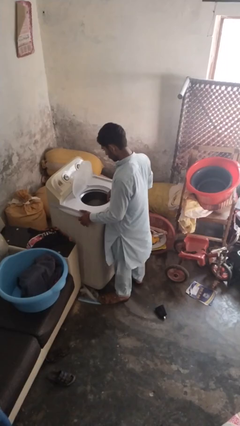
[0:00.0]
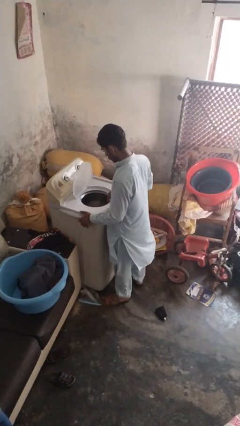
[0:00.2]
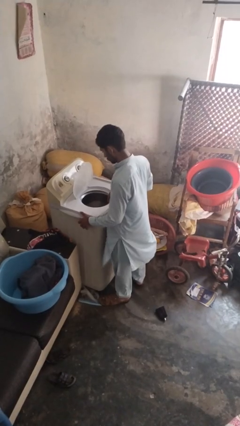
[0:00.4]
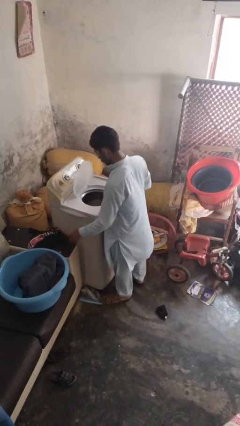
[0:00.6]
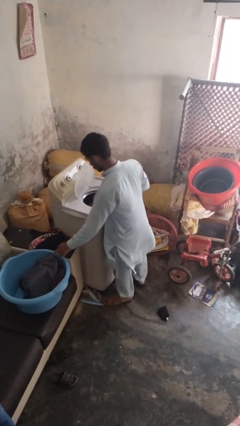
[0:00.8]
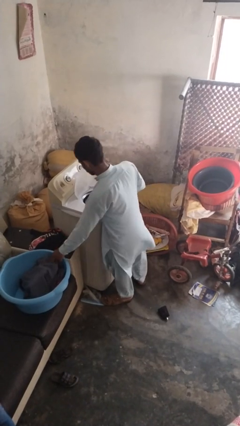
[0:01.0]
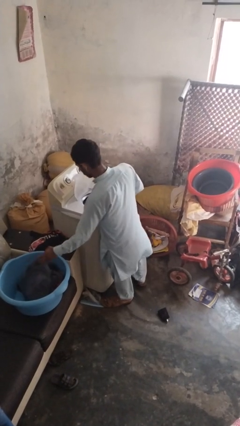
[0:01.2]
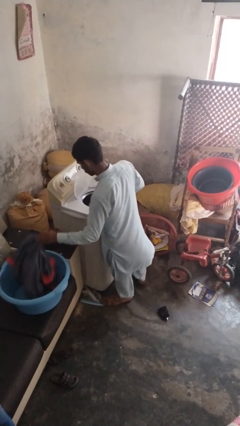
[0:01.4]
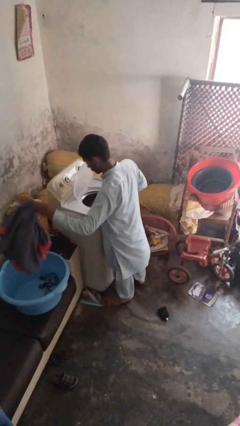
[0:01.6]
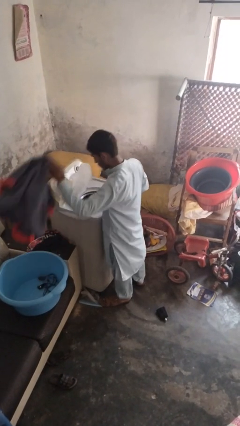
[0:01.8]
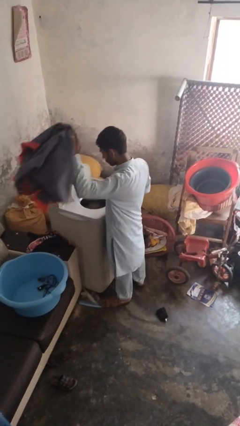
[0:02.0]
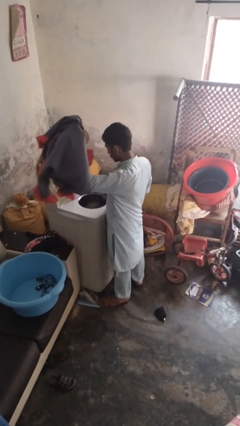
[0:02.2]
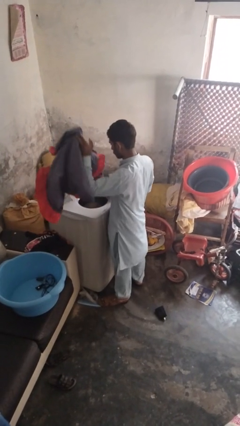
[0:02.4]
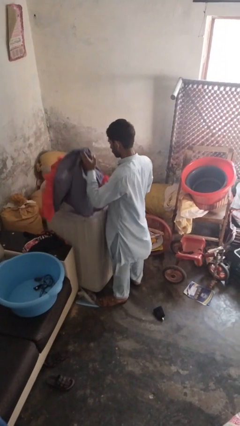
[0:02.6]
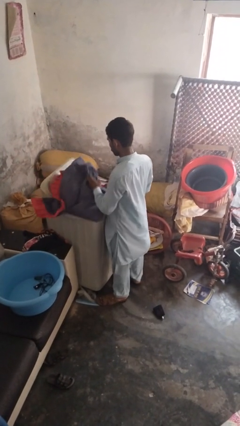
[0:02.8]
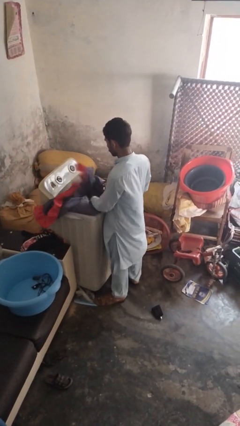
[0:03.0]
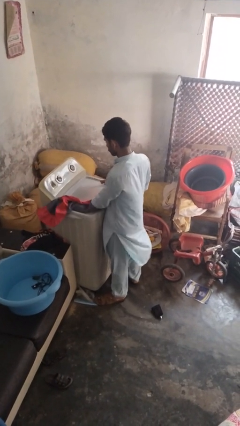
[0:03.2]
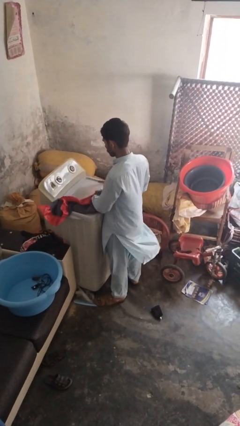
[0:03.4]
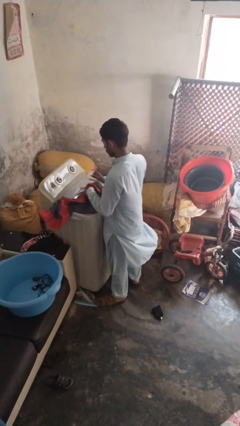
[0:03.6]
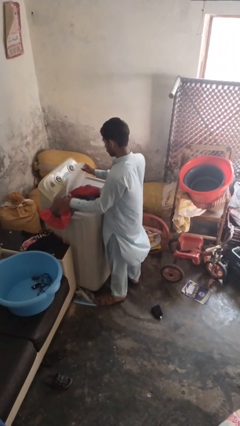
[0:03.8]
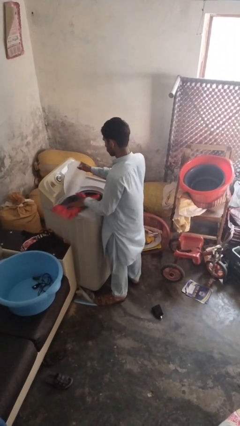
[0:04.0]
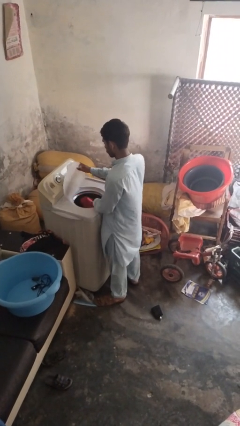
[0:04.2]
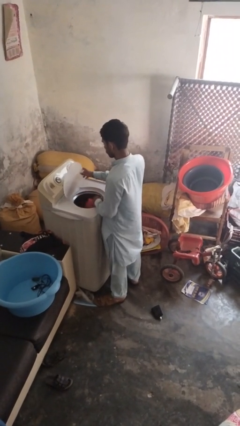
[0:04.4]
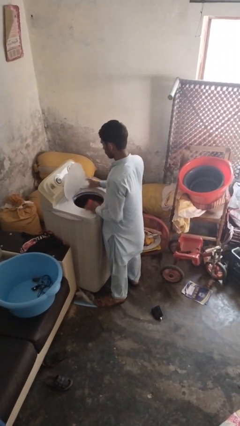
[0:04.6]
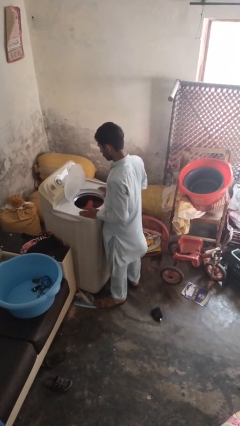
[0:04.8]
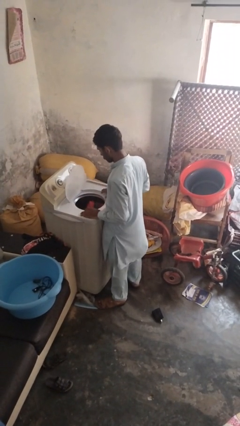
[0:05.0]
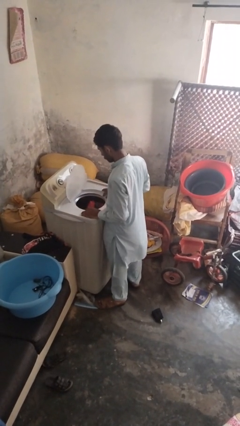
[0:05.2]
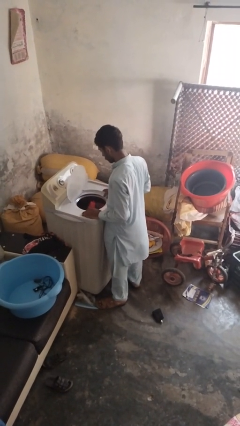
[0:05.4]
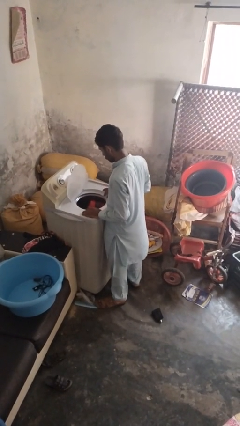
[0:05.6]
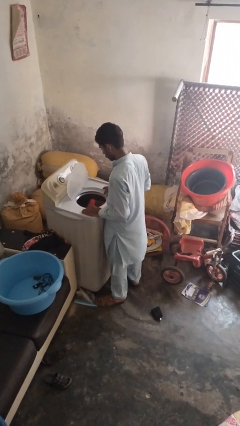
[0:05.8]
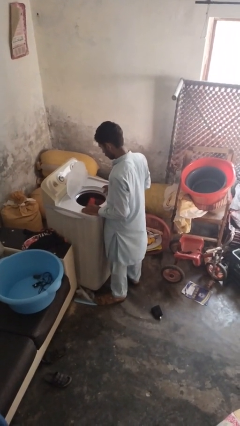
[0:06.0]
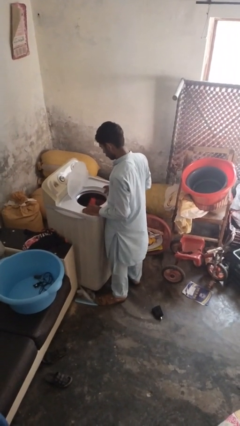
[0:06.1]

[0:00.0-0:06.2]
person loads clotheswasher

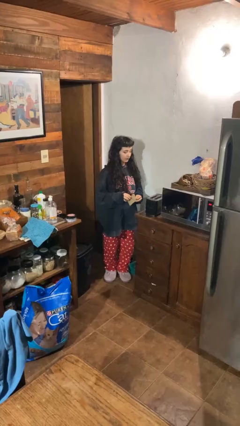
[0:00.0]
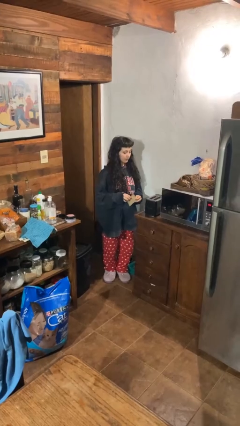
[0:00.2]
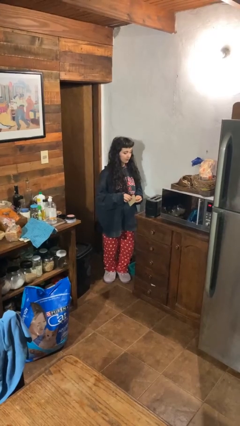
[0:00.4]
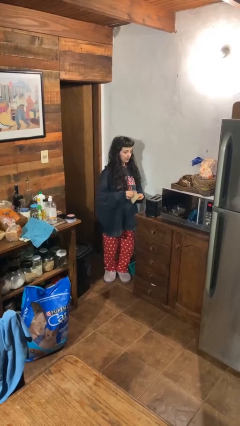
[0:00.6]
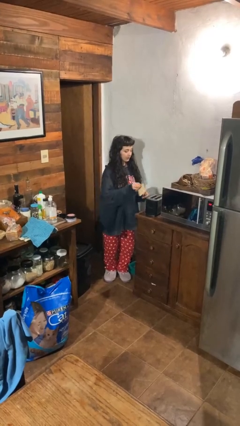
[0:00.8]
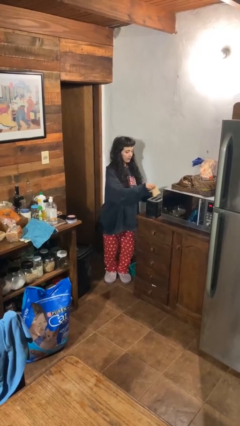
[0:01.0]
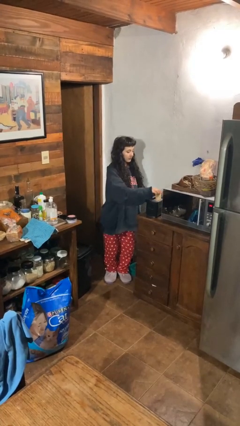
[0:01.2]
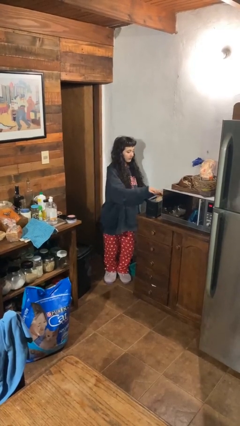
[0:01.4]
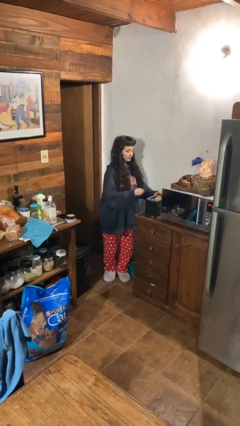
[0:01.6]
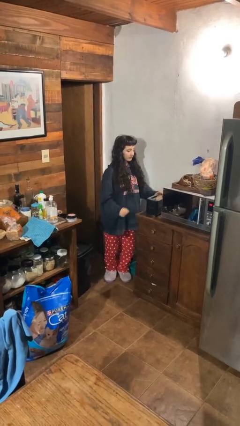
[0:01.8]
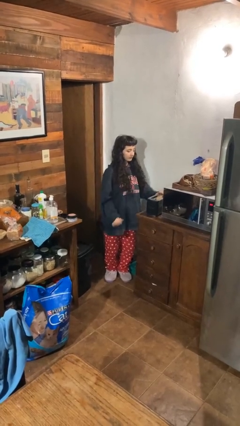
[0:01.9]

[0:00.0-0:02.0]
person puts object into toaster

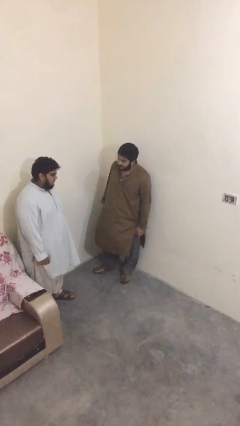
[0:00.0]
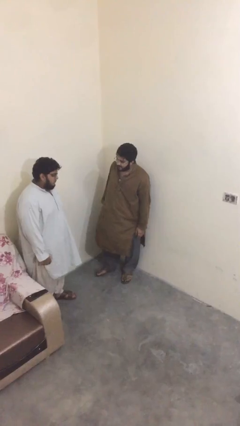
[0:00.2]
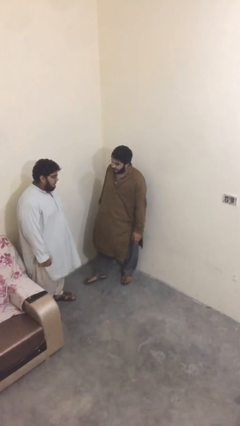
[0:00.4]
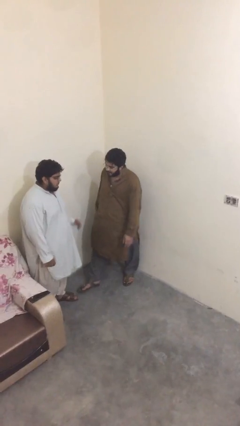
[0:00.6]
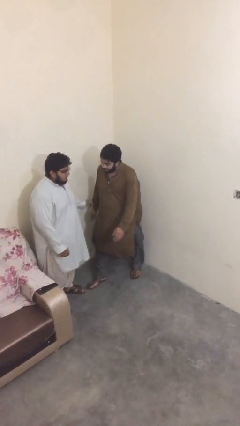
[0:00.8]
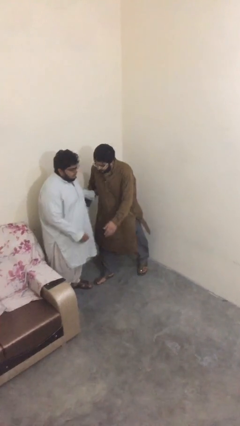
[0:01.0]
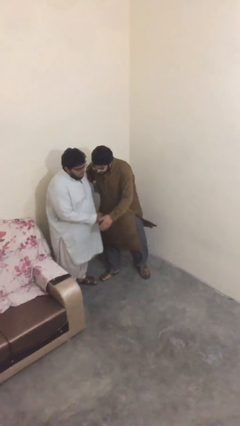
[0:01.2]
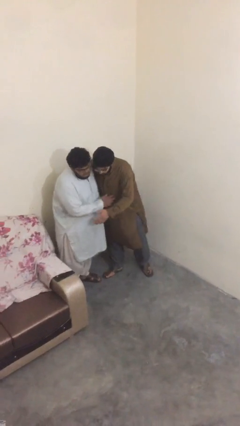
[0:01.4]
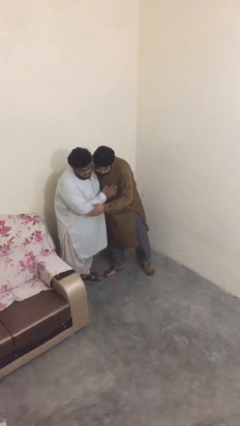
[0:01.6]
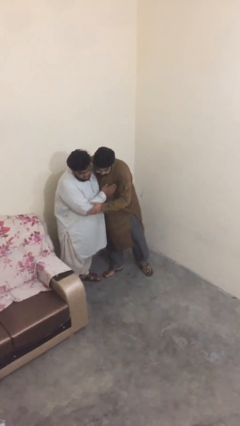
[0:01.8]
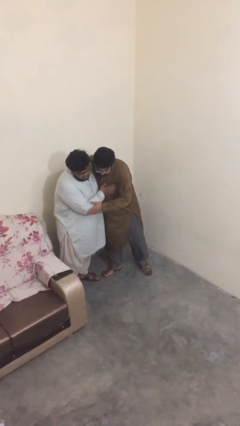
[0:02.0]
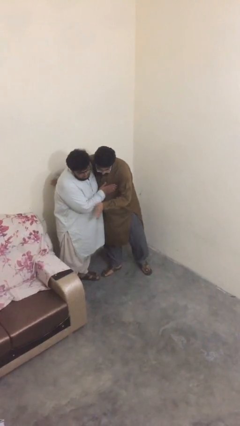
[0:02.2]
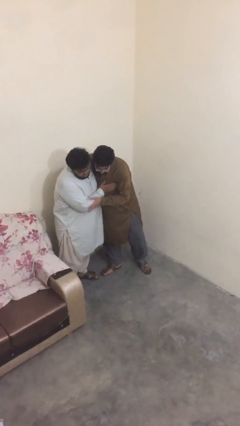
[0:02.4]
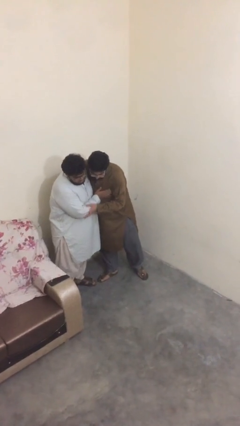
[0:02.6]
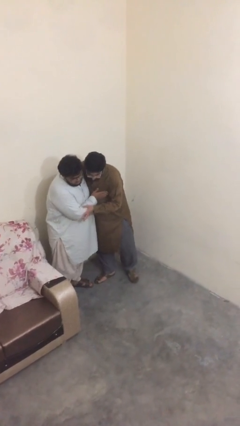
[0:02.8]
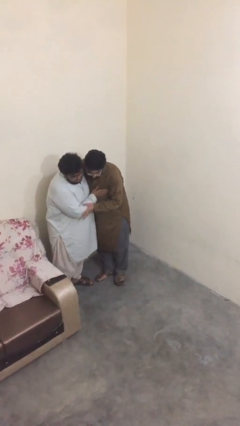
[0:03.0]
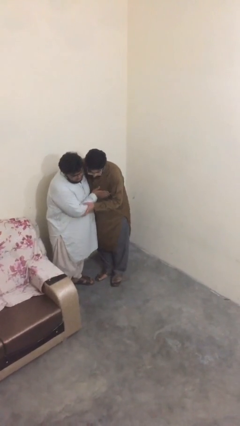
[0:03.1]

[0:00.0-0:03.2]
person embraces person

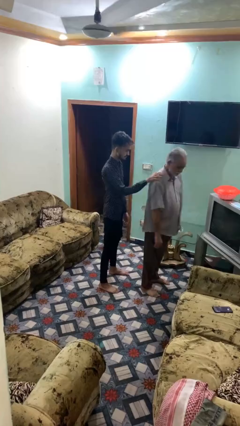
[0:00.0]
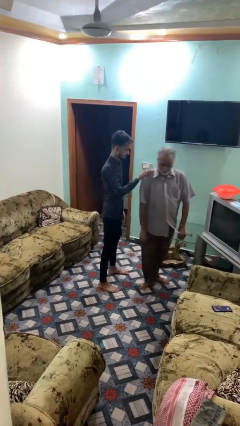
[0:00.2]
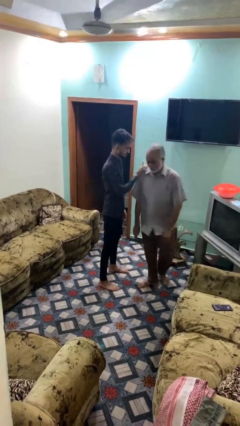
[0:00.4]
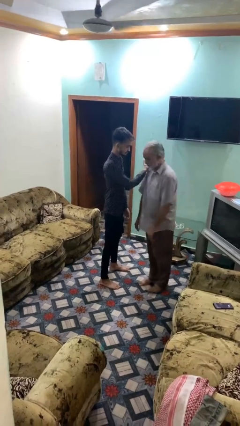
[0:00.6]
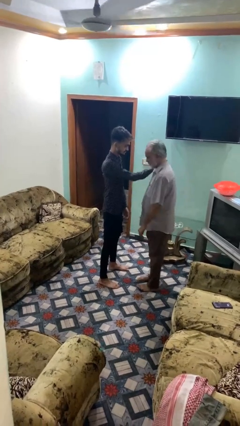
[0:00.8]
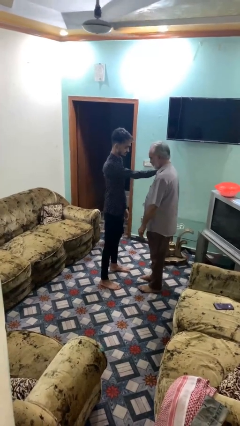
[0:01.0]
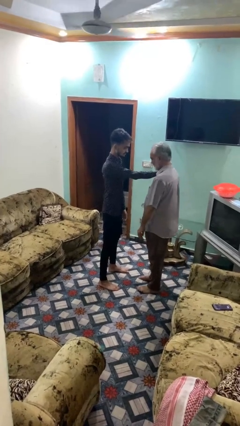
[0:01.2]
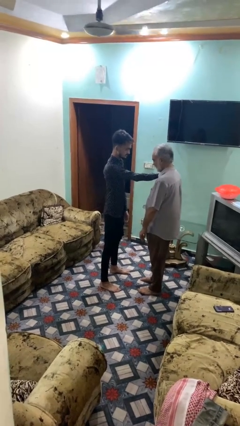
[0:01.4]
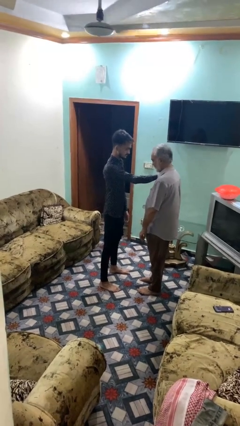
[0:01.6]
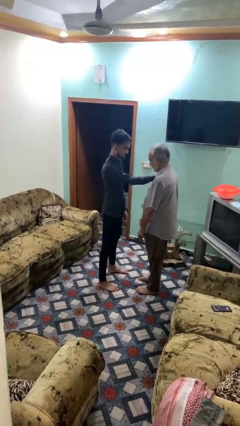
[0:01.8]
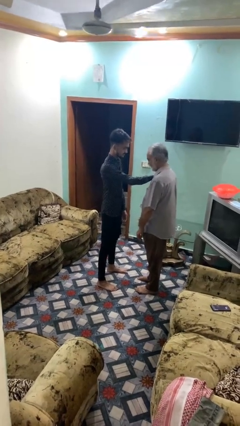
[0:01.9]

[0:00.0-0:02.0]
person spins person around

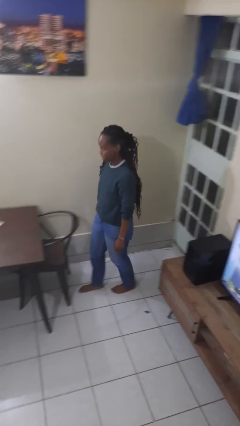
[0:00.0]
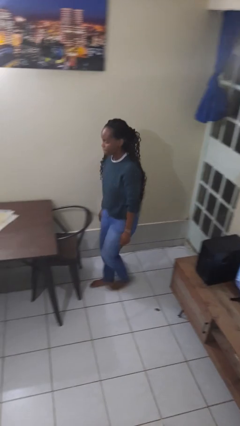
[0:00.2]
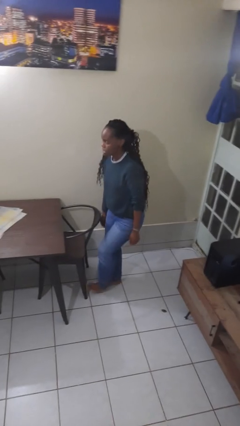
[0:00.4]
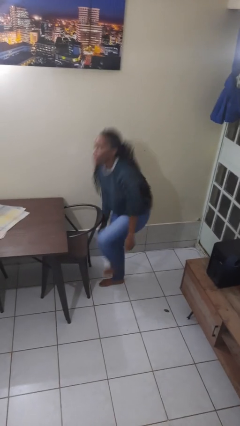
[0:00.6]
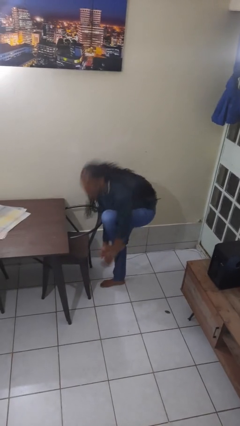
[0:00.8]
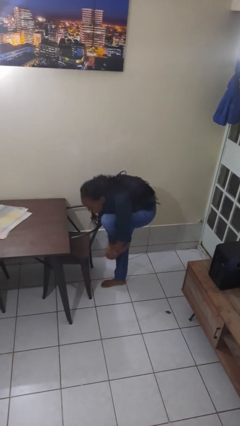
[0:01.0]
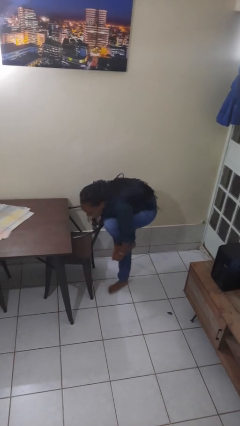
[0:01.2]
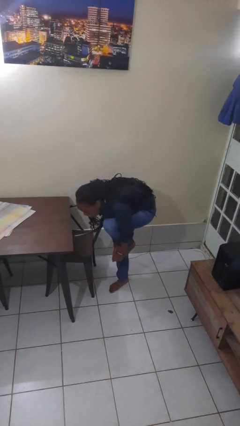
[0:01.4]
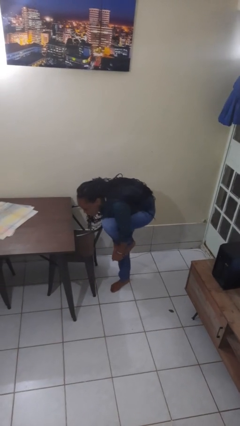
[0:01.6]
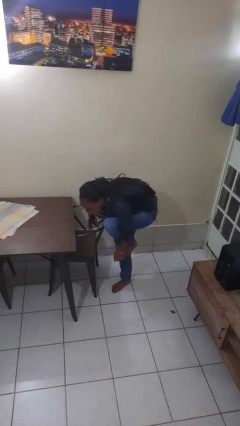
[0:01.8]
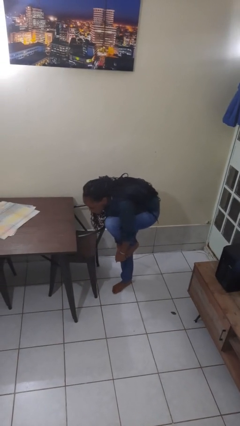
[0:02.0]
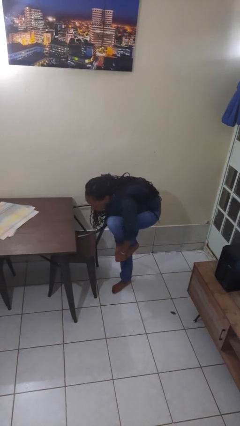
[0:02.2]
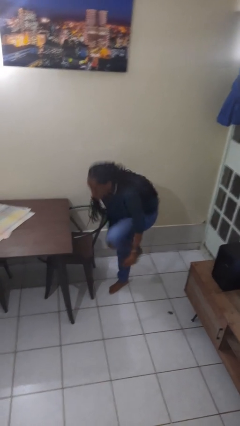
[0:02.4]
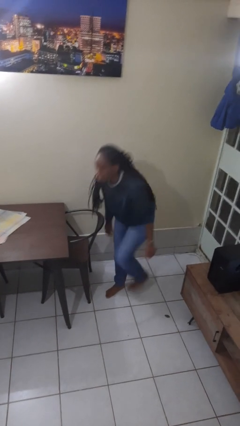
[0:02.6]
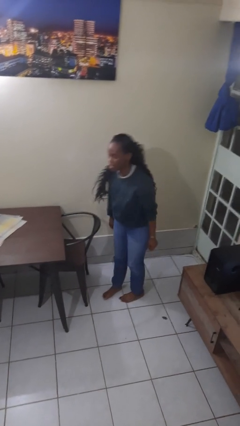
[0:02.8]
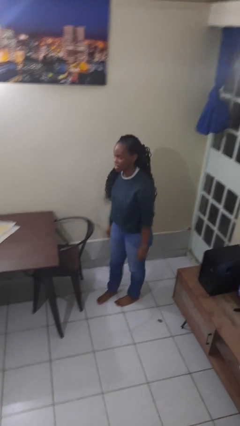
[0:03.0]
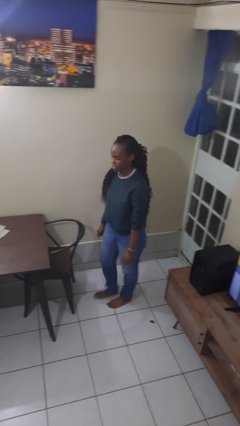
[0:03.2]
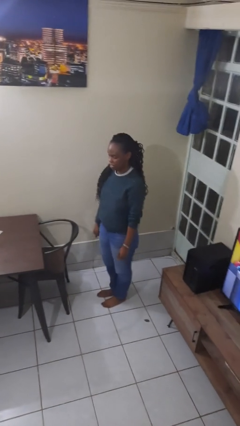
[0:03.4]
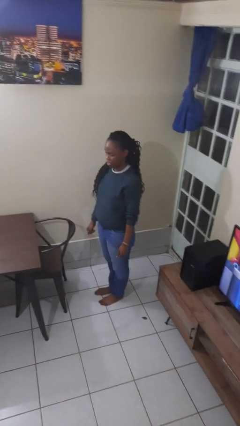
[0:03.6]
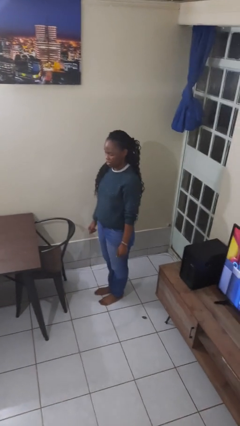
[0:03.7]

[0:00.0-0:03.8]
person stubs toe

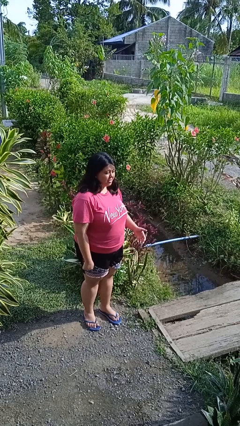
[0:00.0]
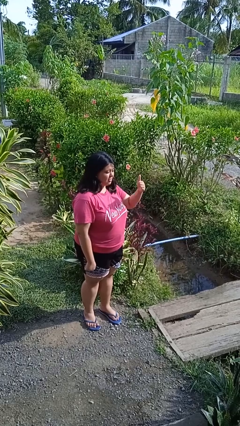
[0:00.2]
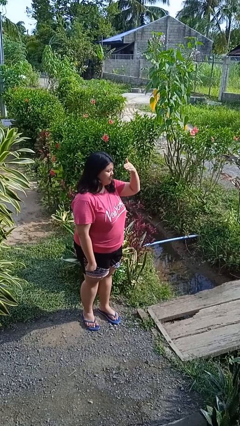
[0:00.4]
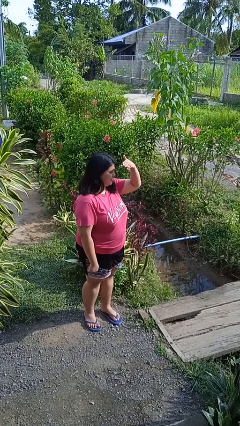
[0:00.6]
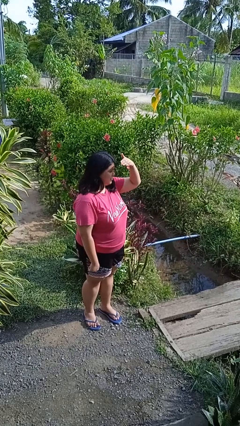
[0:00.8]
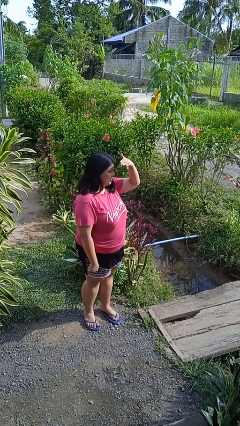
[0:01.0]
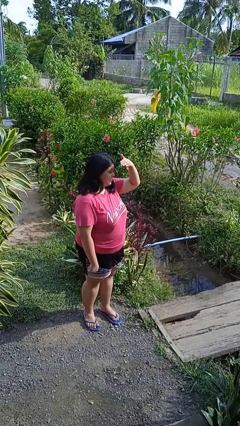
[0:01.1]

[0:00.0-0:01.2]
person shades eyes
